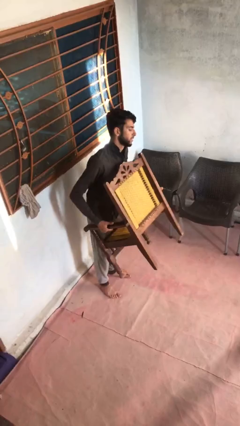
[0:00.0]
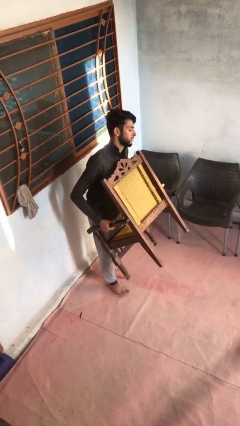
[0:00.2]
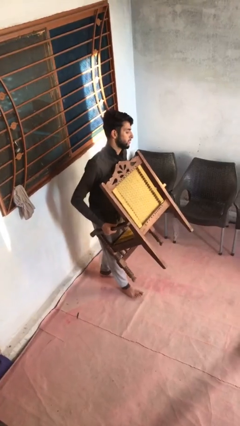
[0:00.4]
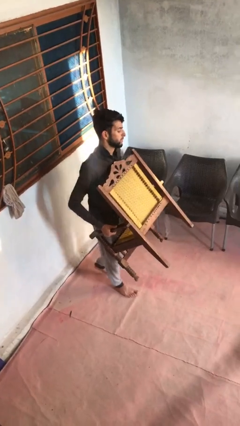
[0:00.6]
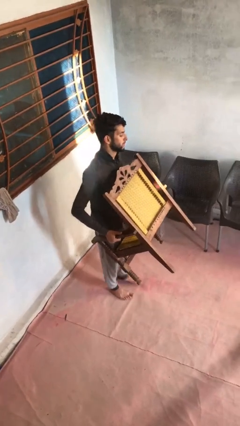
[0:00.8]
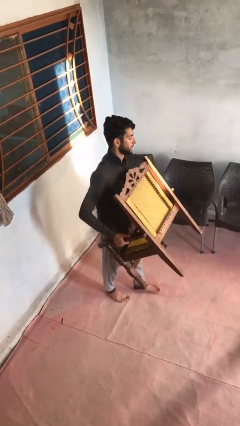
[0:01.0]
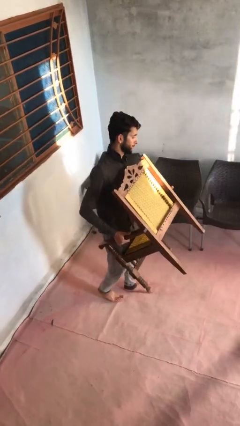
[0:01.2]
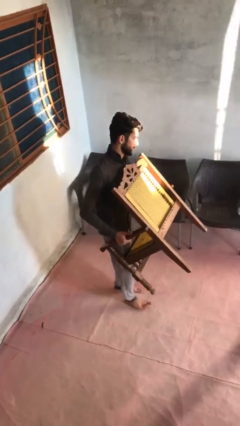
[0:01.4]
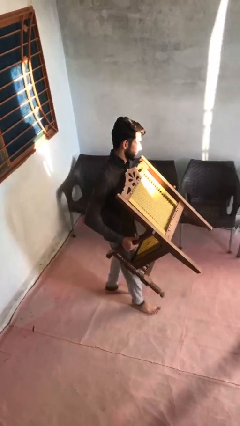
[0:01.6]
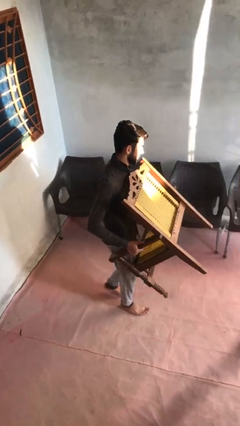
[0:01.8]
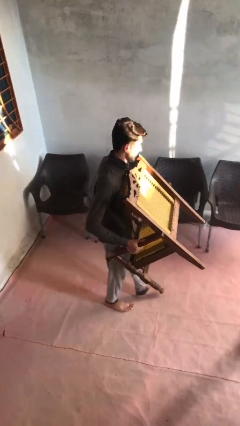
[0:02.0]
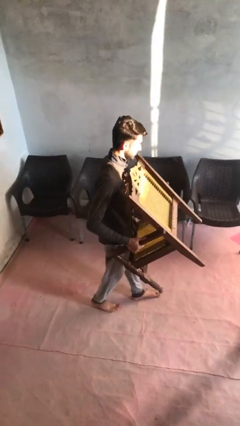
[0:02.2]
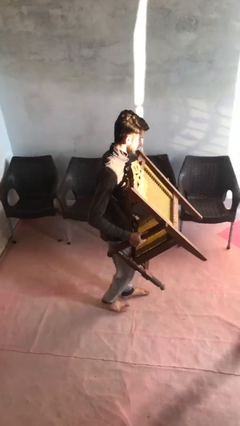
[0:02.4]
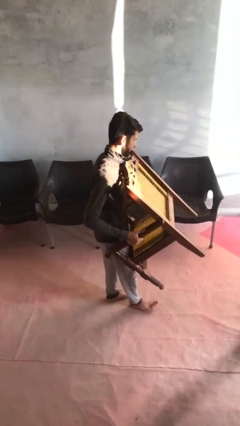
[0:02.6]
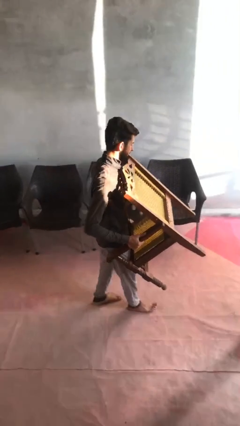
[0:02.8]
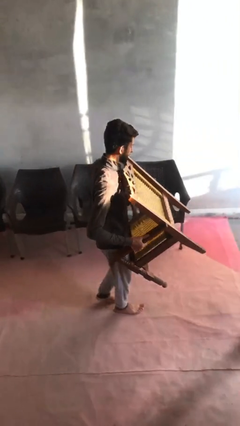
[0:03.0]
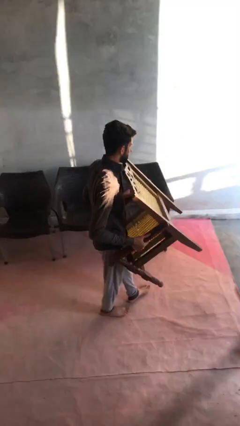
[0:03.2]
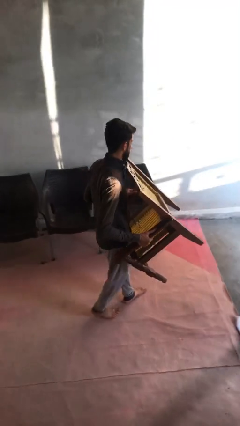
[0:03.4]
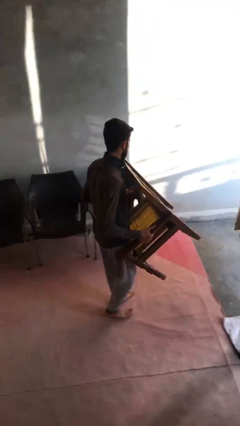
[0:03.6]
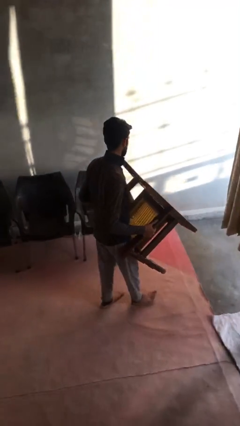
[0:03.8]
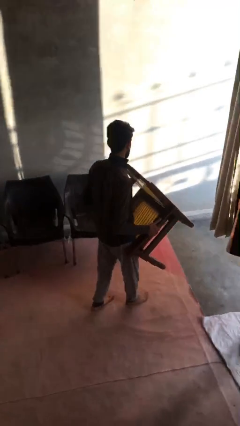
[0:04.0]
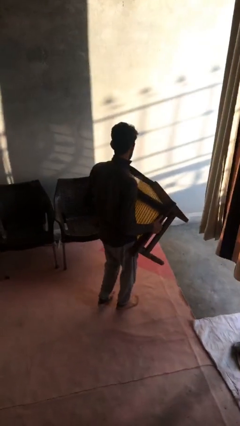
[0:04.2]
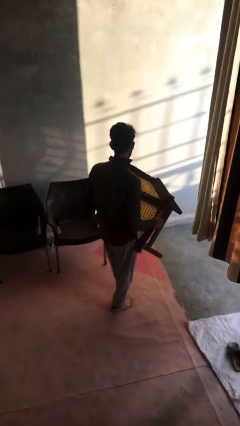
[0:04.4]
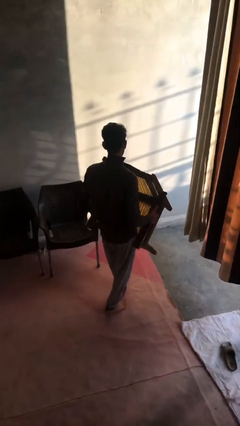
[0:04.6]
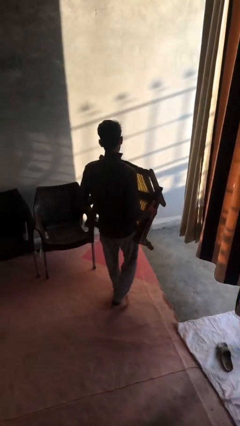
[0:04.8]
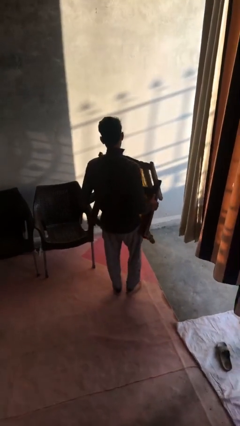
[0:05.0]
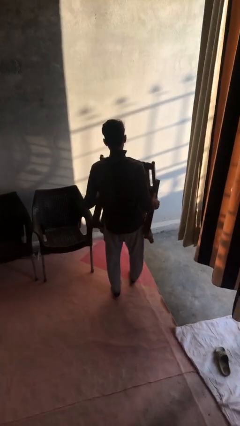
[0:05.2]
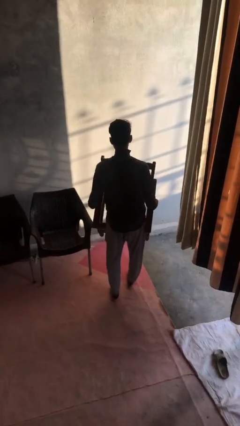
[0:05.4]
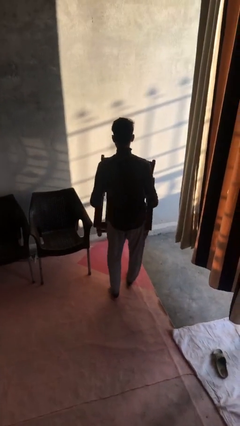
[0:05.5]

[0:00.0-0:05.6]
person carries heavy object

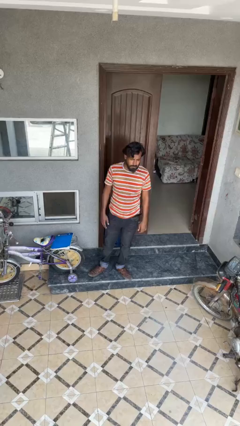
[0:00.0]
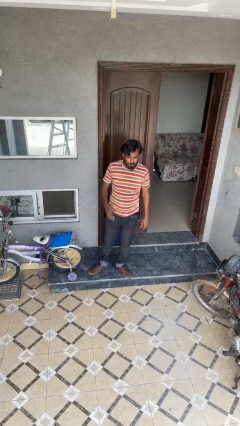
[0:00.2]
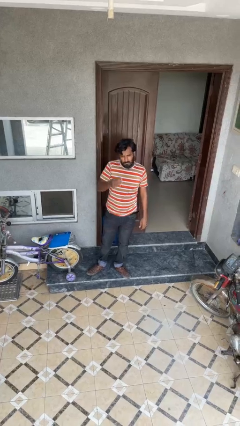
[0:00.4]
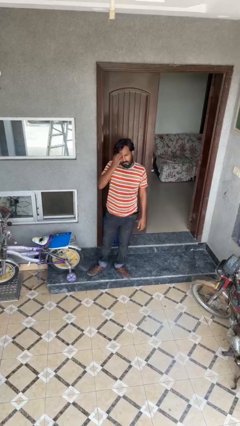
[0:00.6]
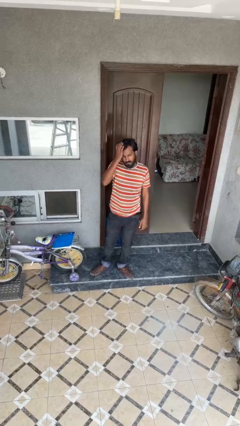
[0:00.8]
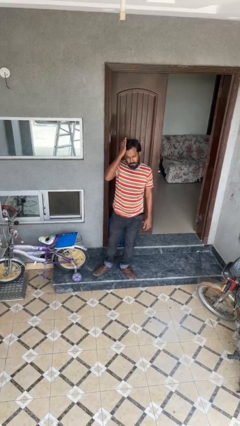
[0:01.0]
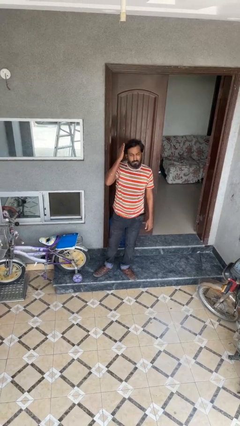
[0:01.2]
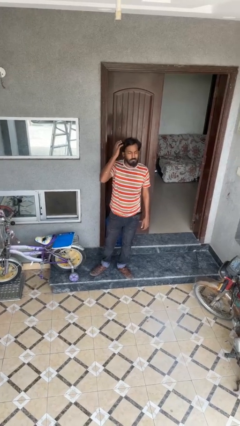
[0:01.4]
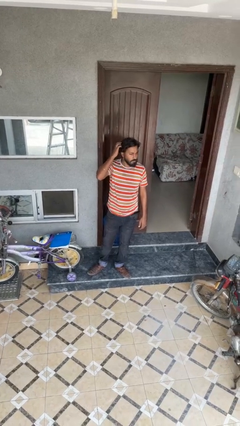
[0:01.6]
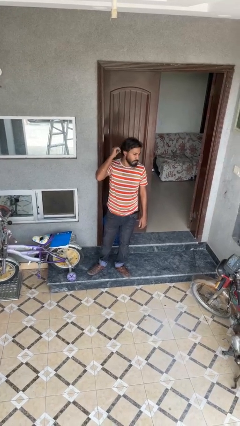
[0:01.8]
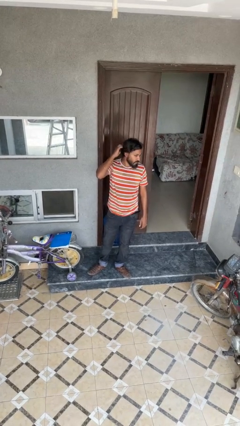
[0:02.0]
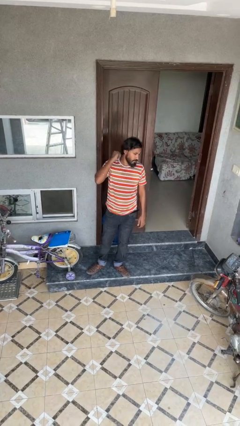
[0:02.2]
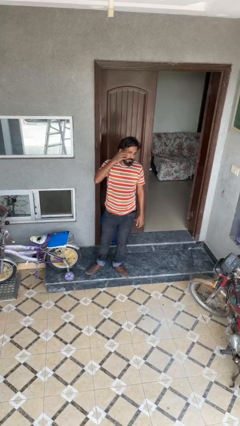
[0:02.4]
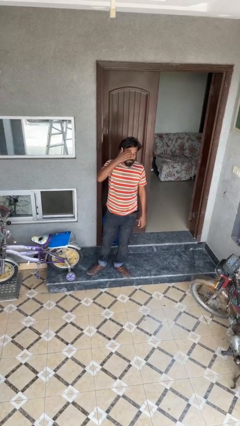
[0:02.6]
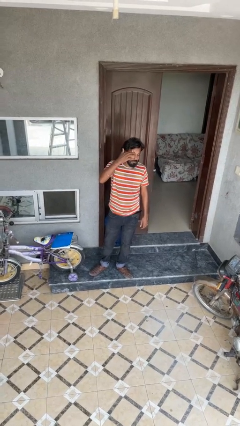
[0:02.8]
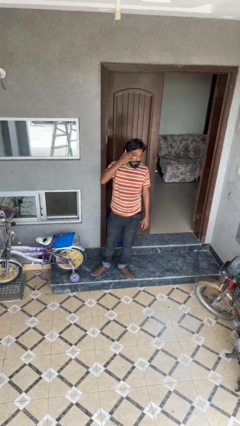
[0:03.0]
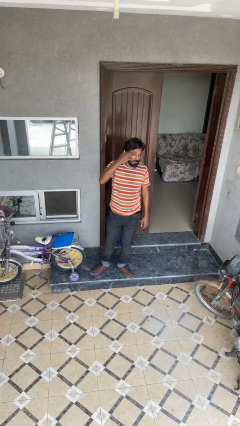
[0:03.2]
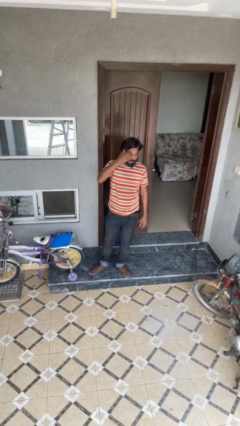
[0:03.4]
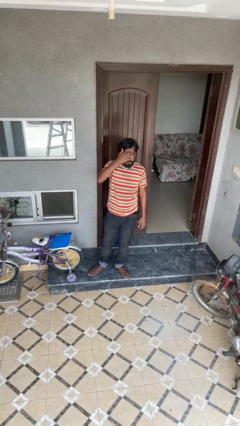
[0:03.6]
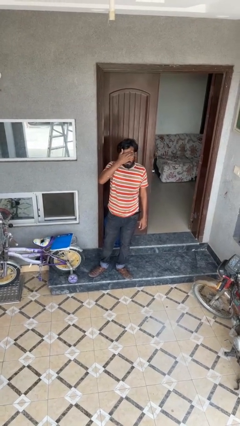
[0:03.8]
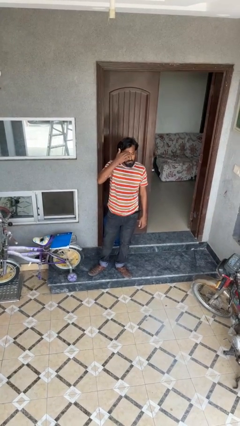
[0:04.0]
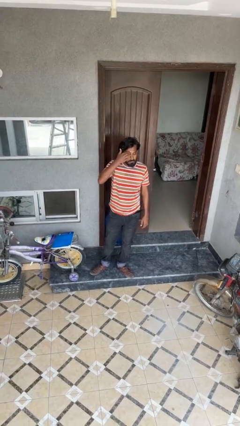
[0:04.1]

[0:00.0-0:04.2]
person scratches face

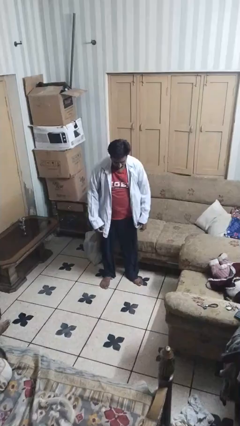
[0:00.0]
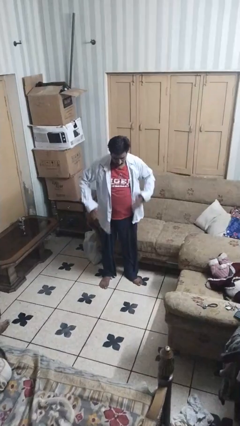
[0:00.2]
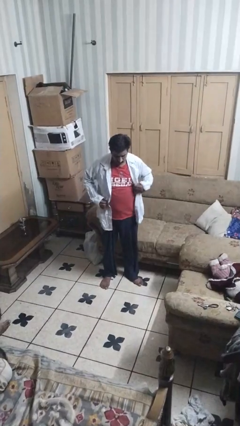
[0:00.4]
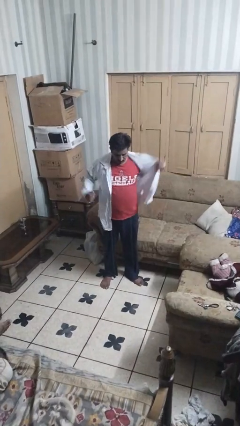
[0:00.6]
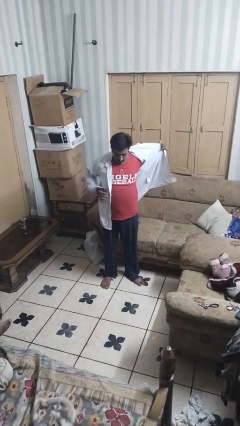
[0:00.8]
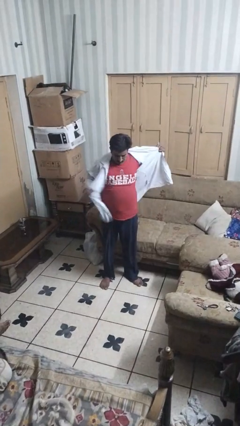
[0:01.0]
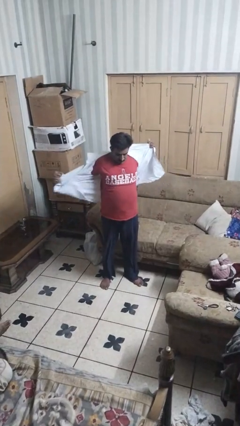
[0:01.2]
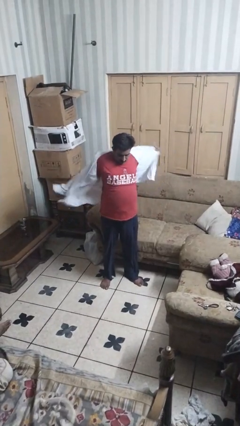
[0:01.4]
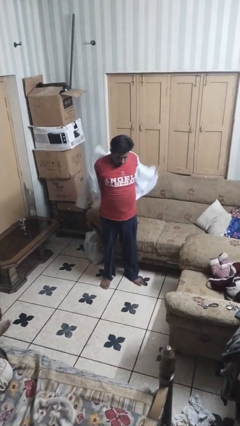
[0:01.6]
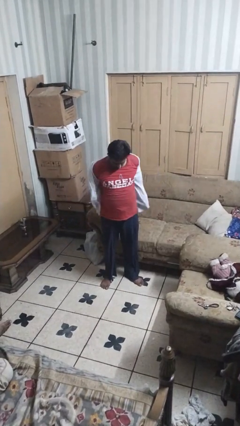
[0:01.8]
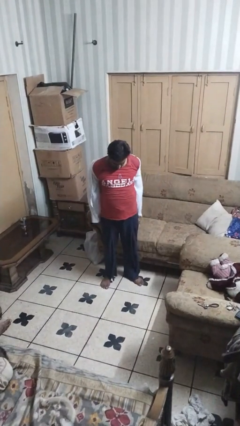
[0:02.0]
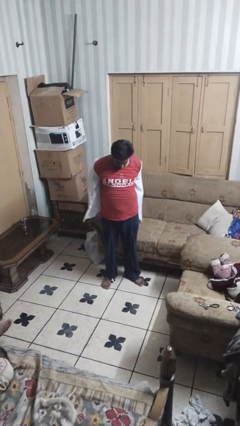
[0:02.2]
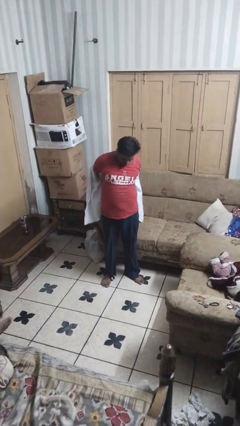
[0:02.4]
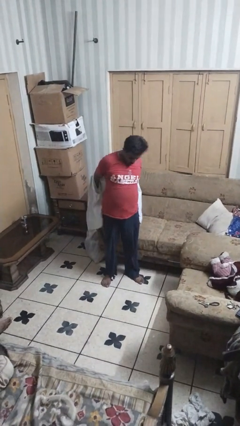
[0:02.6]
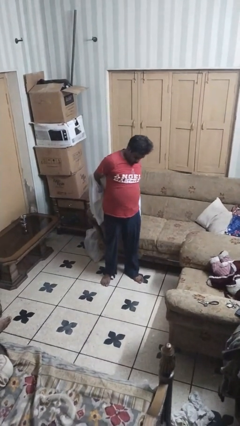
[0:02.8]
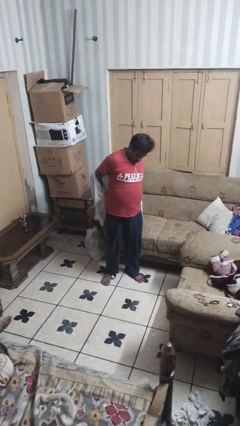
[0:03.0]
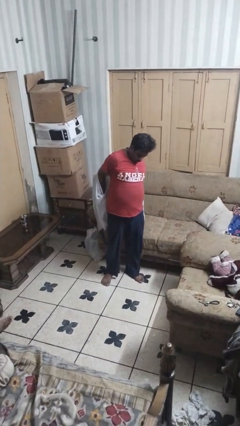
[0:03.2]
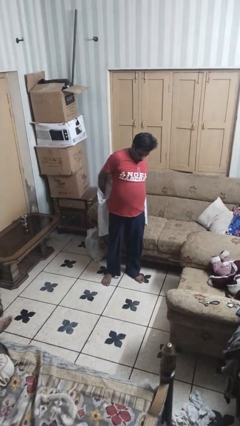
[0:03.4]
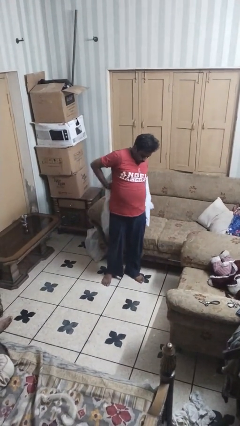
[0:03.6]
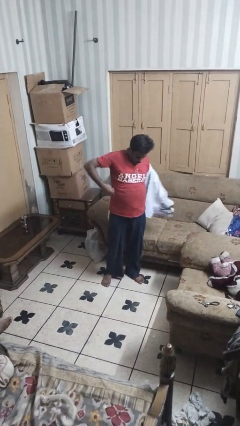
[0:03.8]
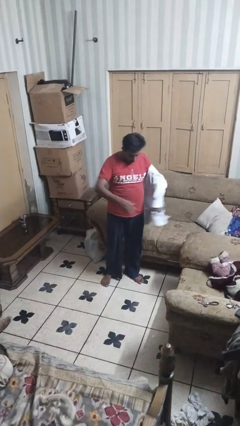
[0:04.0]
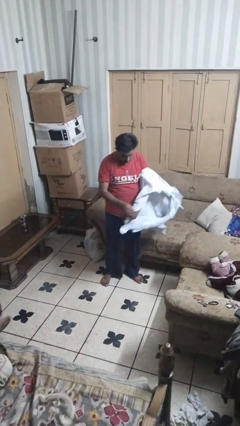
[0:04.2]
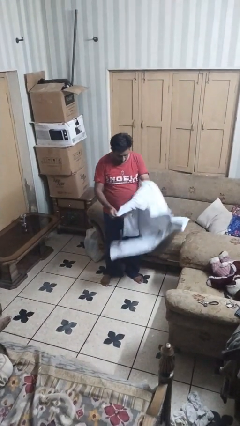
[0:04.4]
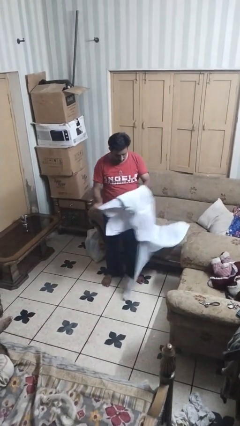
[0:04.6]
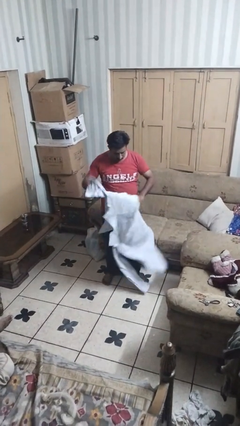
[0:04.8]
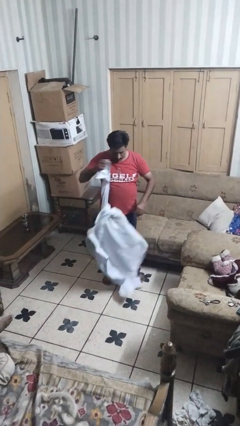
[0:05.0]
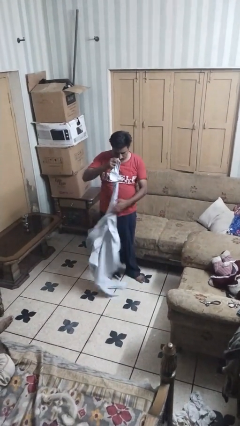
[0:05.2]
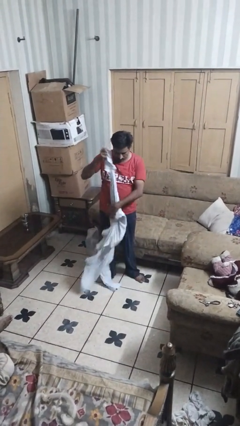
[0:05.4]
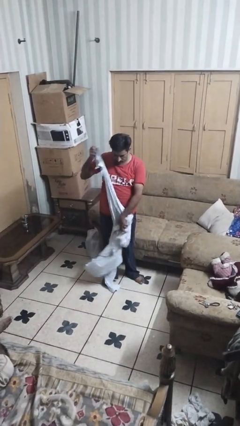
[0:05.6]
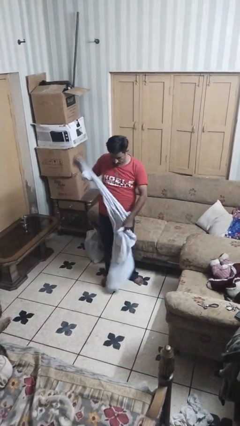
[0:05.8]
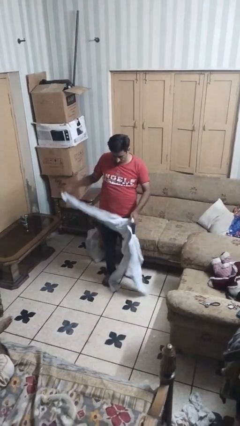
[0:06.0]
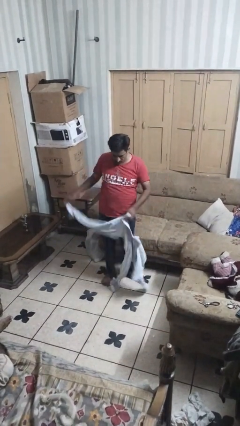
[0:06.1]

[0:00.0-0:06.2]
person takes off shirt

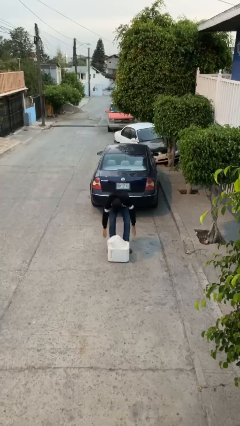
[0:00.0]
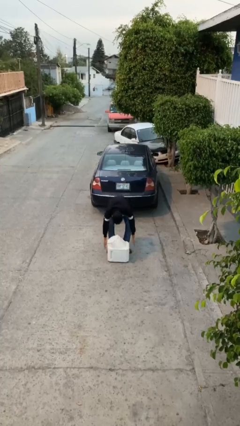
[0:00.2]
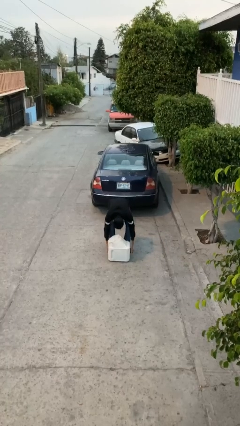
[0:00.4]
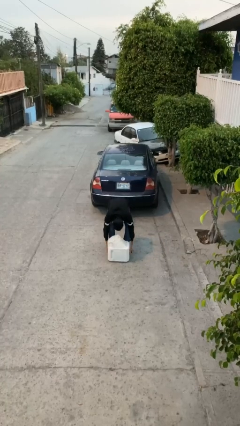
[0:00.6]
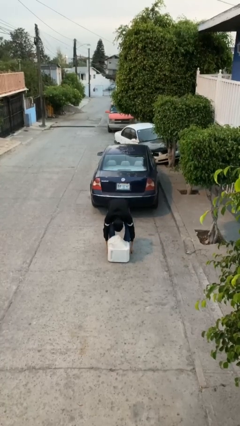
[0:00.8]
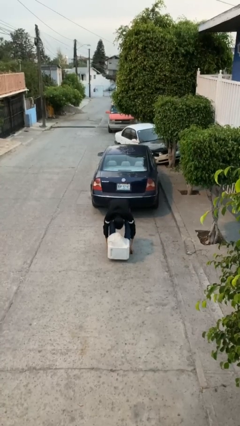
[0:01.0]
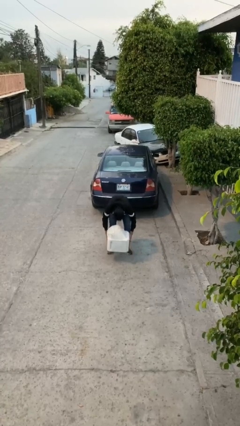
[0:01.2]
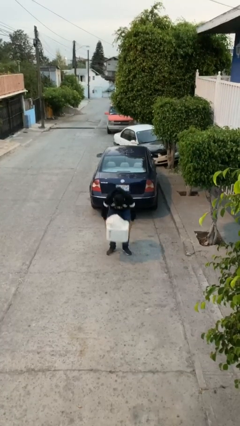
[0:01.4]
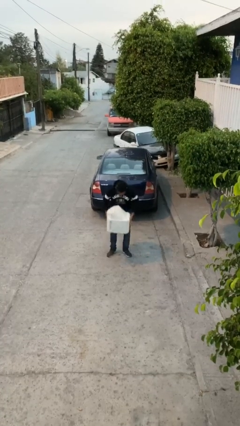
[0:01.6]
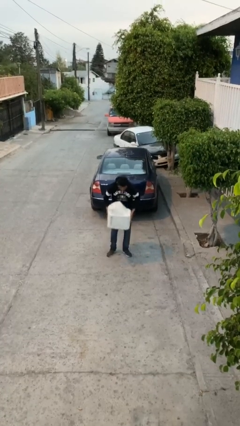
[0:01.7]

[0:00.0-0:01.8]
person picks up object from floor
